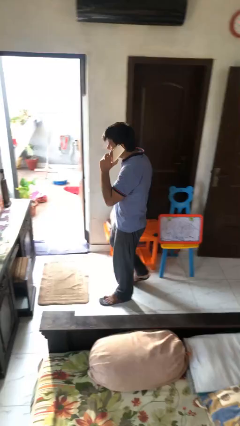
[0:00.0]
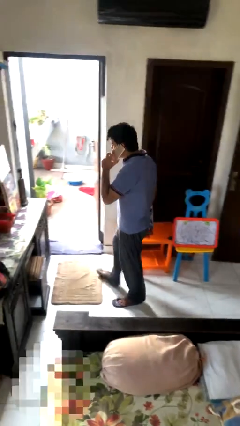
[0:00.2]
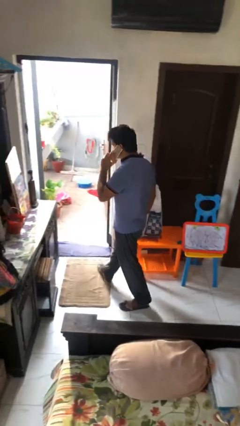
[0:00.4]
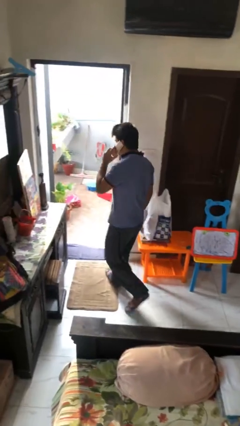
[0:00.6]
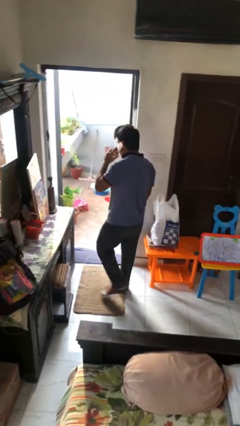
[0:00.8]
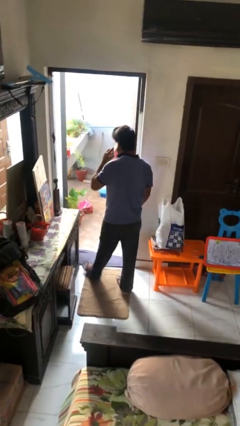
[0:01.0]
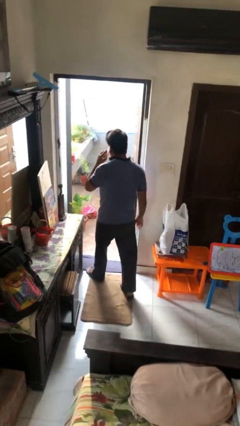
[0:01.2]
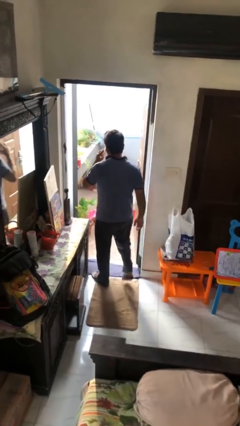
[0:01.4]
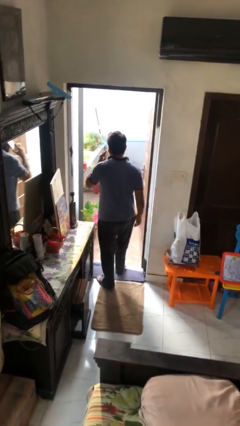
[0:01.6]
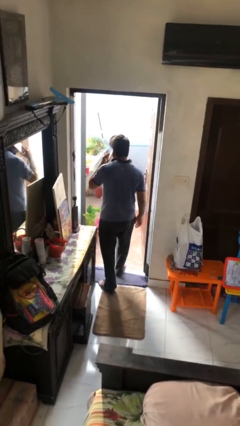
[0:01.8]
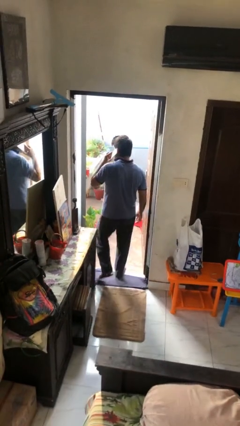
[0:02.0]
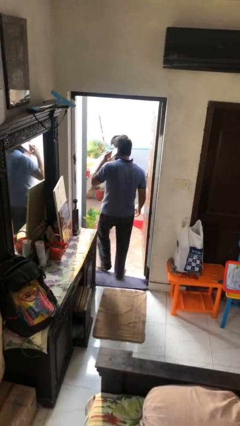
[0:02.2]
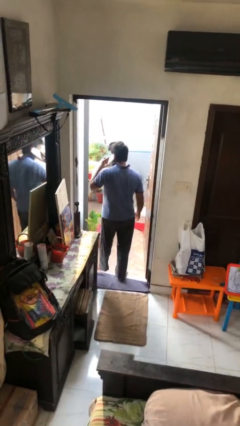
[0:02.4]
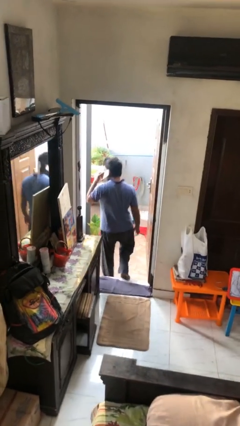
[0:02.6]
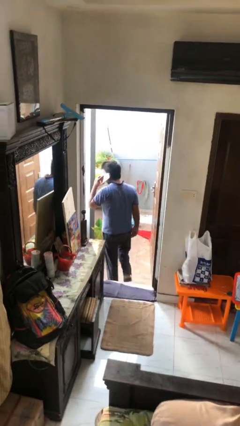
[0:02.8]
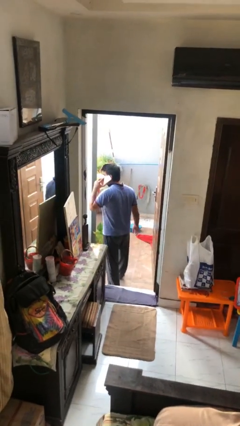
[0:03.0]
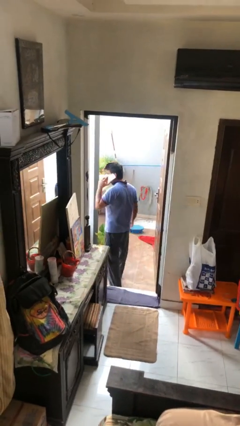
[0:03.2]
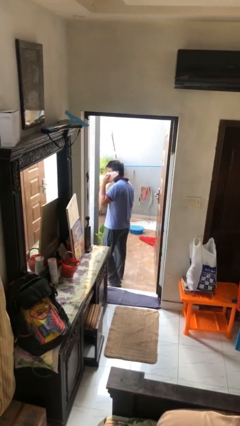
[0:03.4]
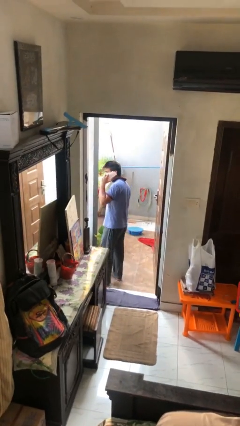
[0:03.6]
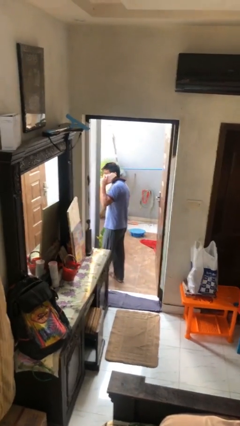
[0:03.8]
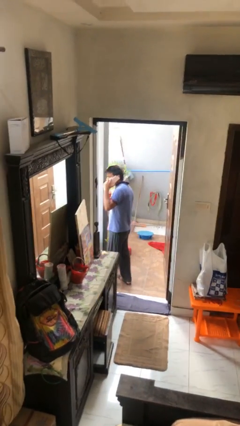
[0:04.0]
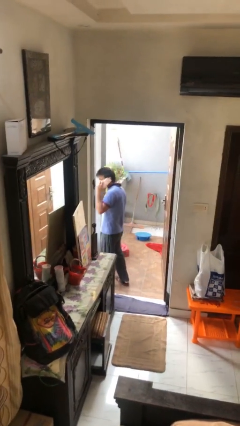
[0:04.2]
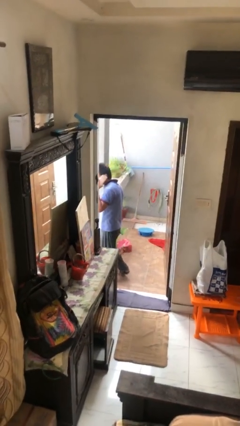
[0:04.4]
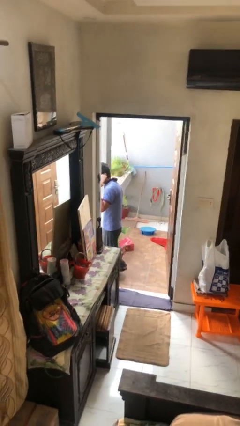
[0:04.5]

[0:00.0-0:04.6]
person exits scene through structure

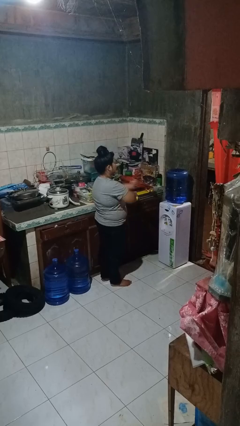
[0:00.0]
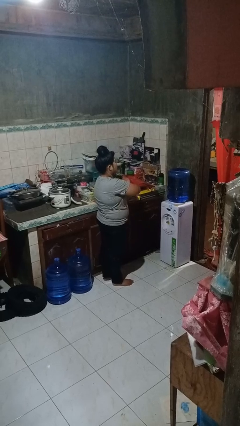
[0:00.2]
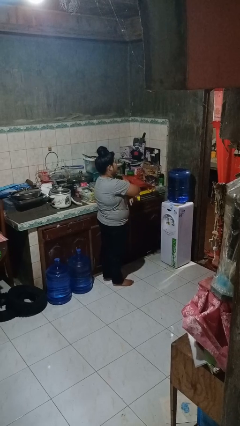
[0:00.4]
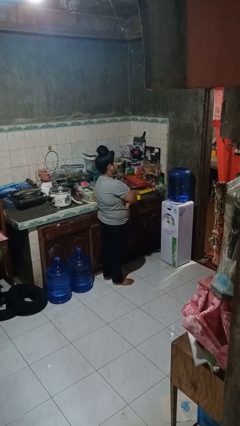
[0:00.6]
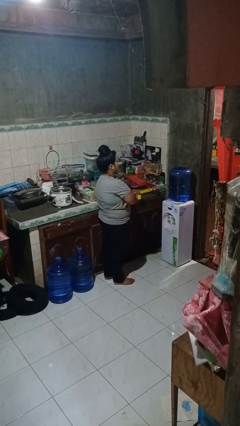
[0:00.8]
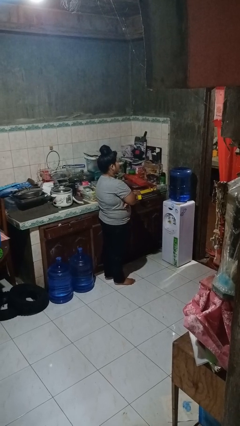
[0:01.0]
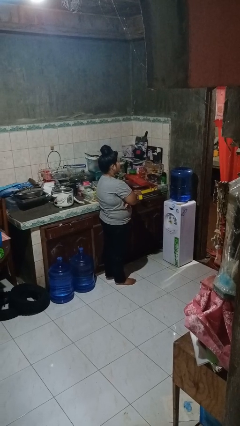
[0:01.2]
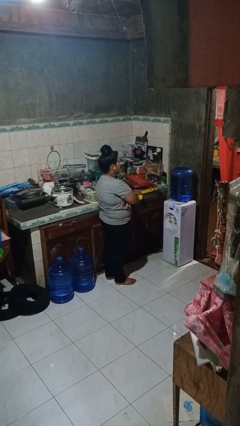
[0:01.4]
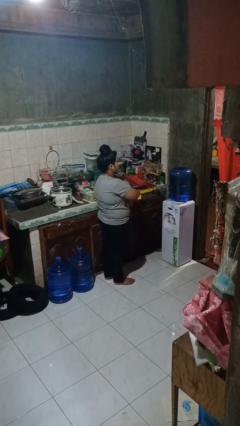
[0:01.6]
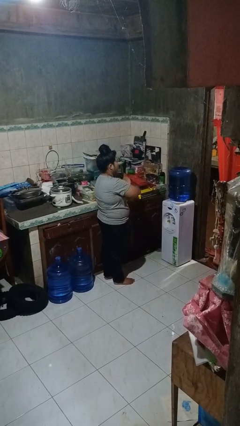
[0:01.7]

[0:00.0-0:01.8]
person crosses arms

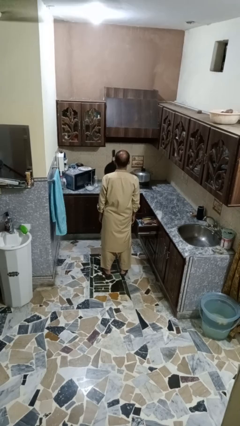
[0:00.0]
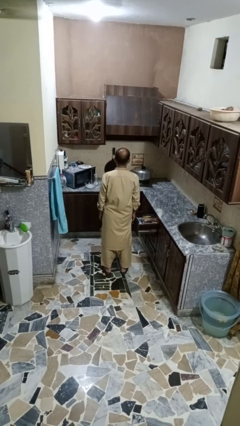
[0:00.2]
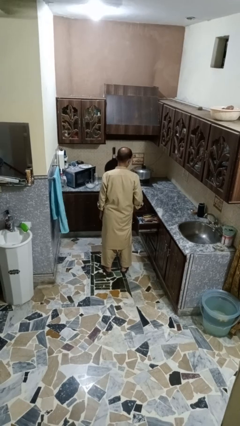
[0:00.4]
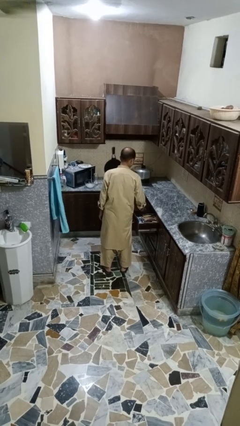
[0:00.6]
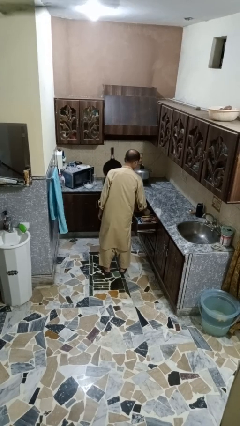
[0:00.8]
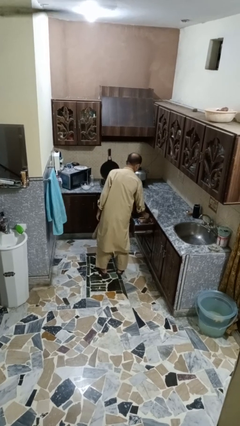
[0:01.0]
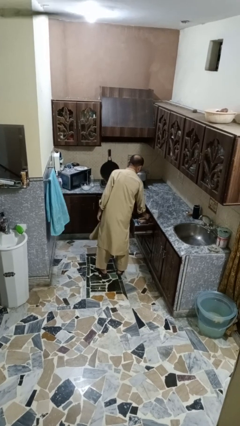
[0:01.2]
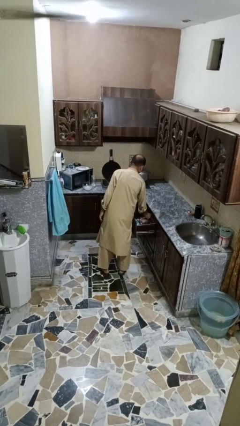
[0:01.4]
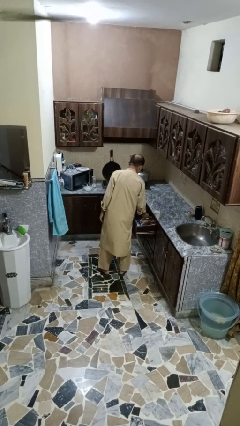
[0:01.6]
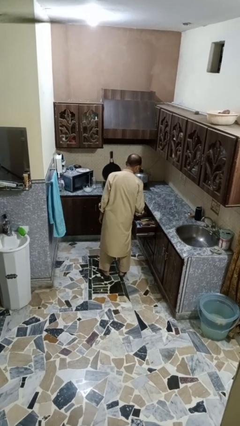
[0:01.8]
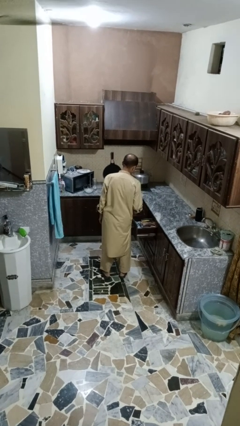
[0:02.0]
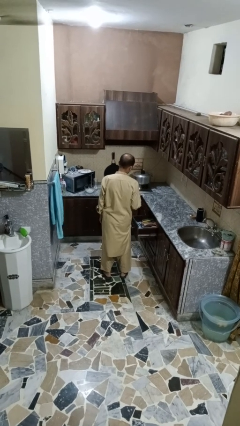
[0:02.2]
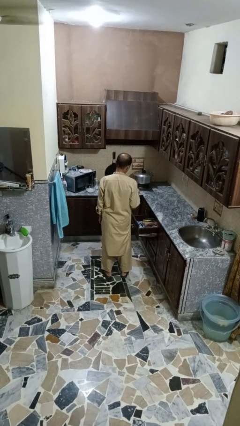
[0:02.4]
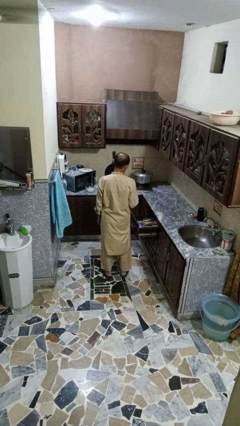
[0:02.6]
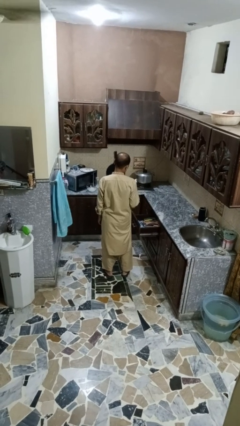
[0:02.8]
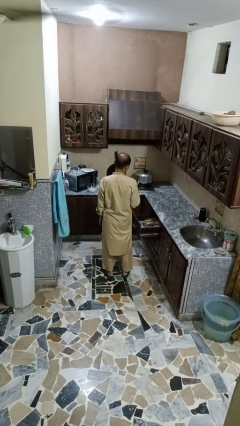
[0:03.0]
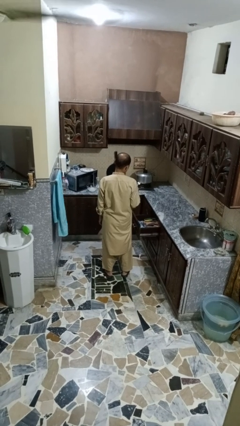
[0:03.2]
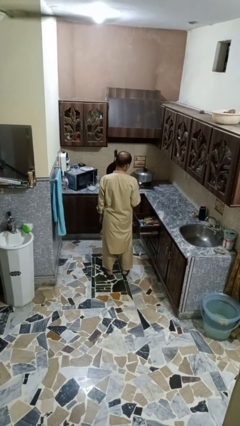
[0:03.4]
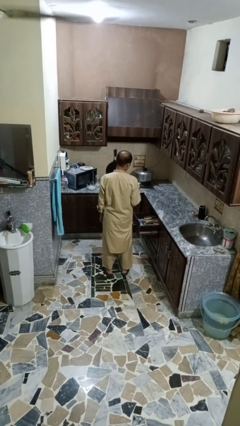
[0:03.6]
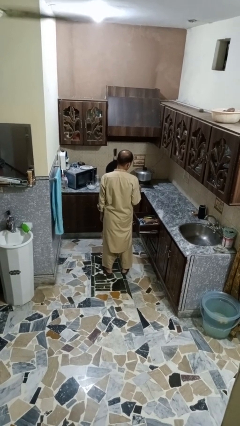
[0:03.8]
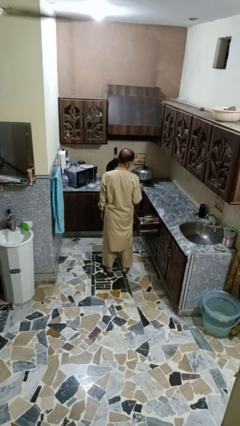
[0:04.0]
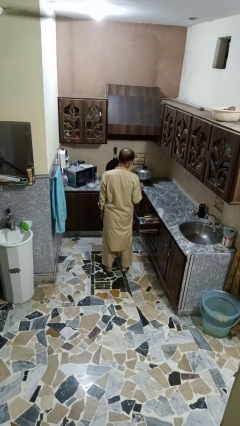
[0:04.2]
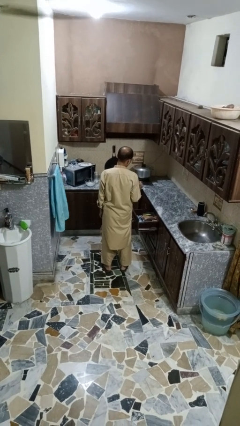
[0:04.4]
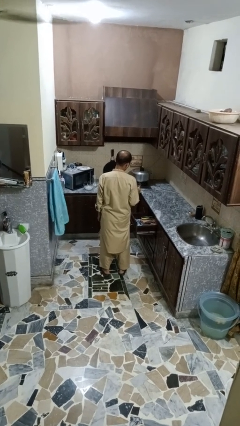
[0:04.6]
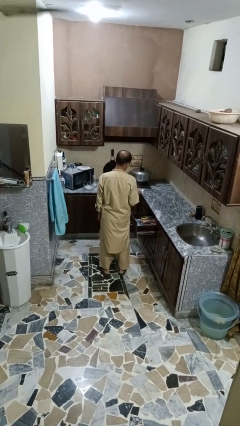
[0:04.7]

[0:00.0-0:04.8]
person takes object from kitchen drawer

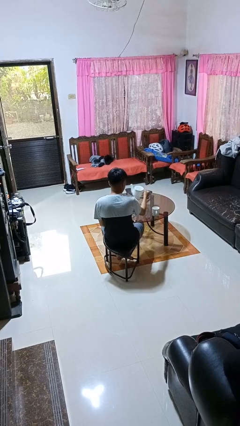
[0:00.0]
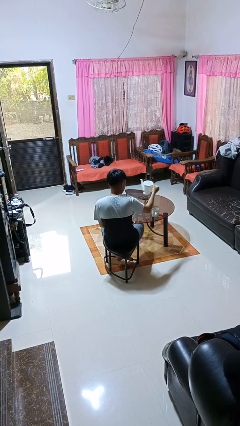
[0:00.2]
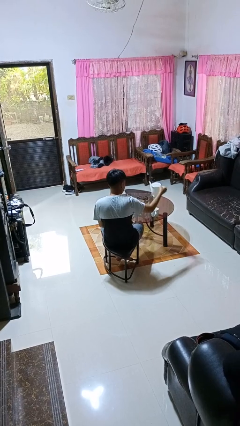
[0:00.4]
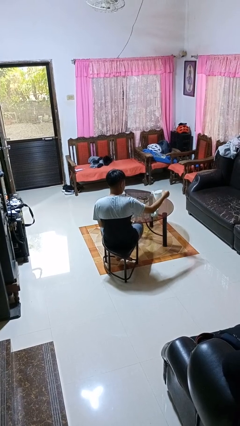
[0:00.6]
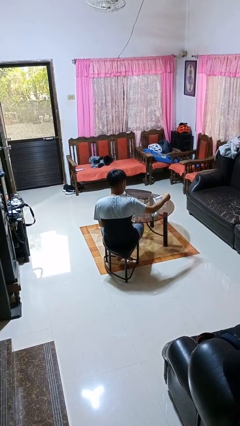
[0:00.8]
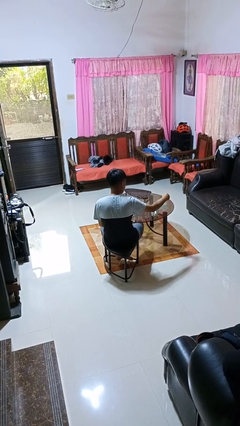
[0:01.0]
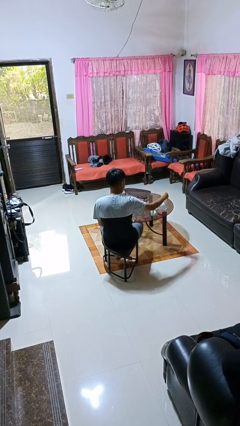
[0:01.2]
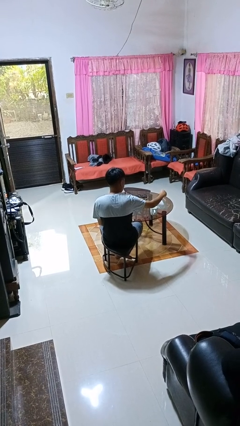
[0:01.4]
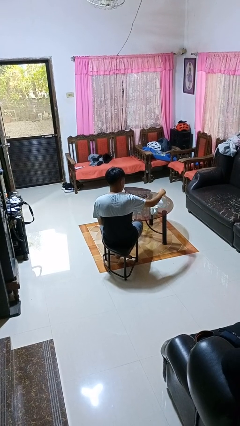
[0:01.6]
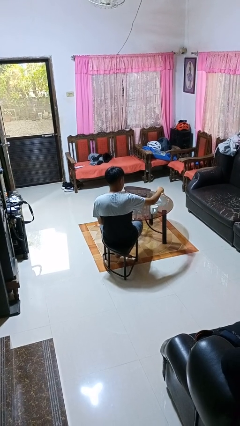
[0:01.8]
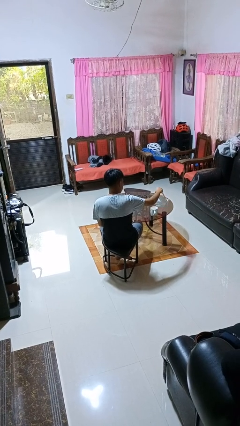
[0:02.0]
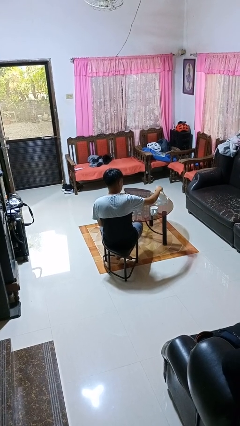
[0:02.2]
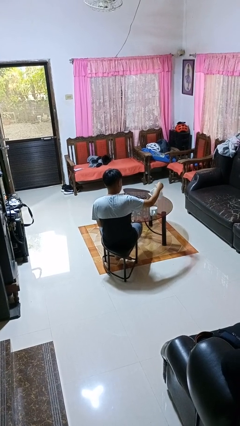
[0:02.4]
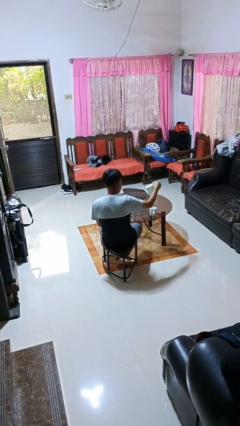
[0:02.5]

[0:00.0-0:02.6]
person pours coffee into mug

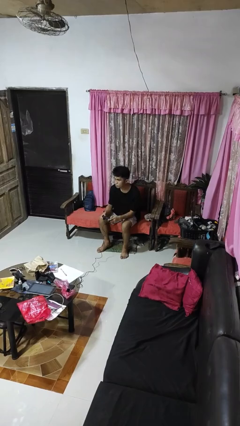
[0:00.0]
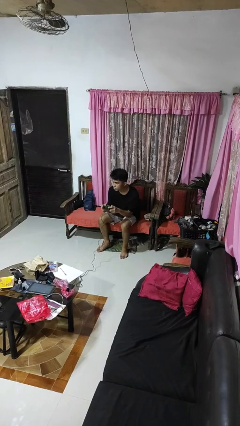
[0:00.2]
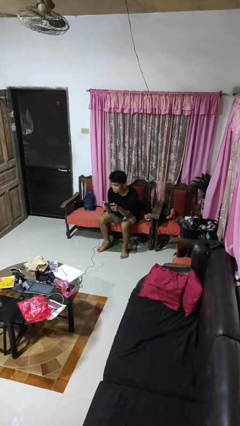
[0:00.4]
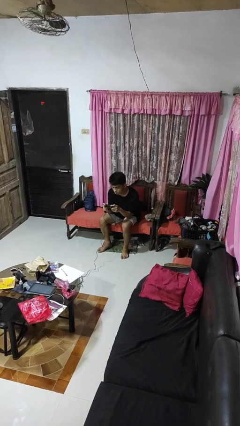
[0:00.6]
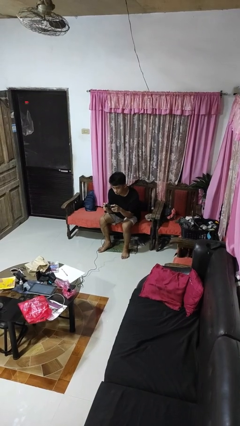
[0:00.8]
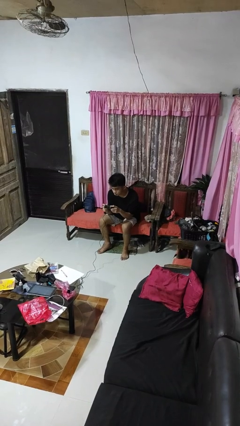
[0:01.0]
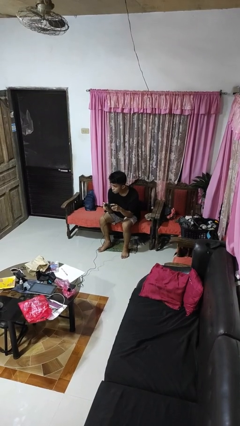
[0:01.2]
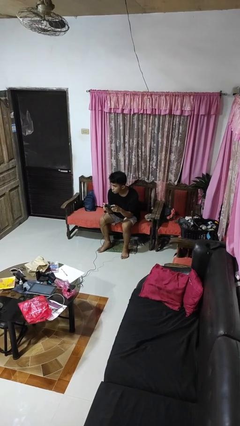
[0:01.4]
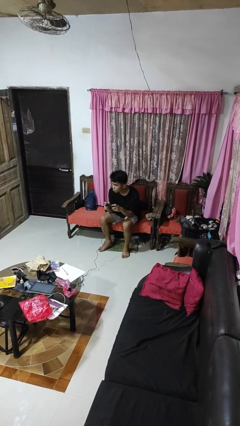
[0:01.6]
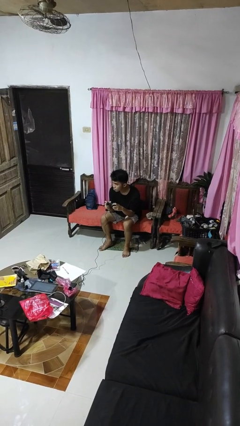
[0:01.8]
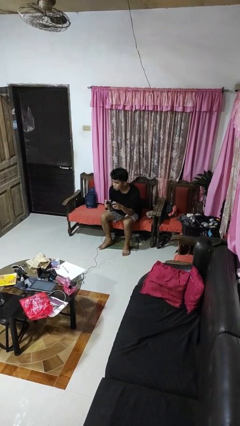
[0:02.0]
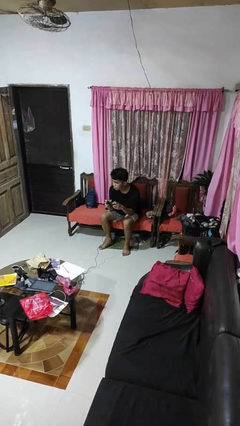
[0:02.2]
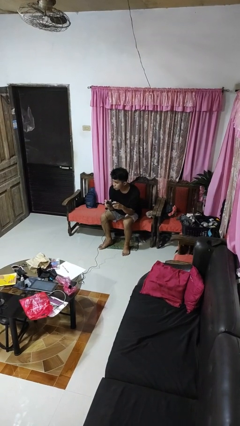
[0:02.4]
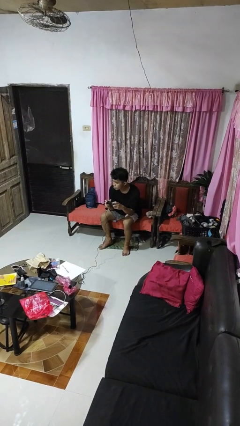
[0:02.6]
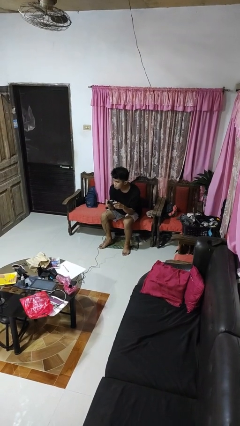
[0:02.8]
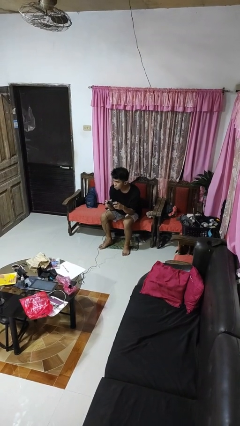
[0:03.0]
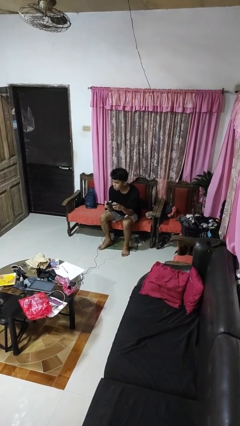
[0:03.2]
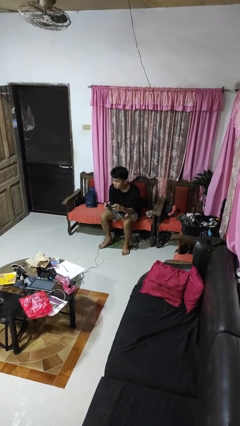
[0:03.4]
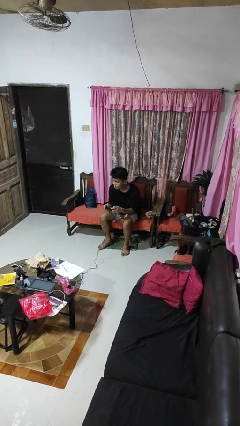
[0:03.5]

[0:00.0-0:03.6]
person interacts with handheld game
